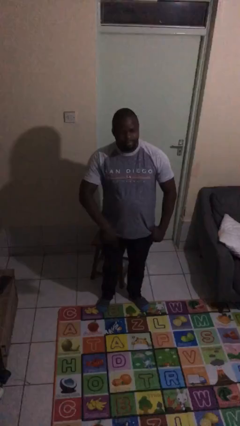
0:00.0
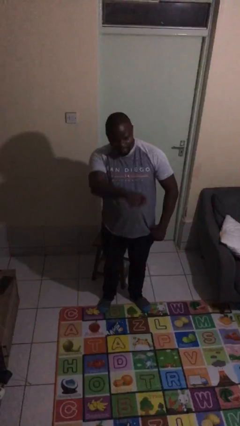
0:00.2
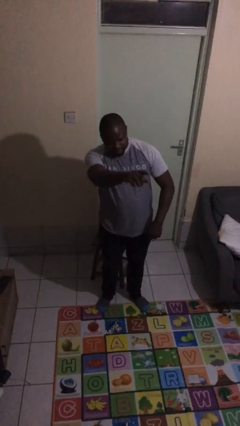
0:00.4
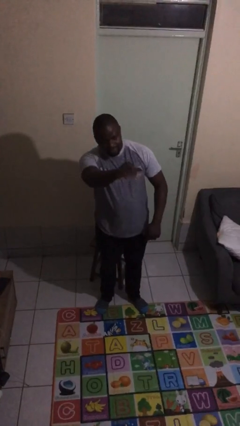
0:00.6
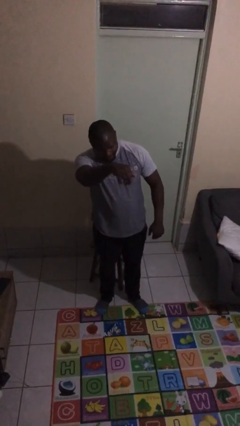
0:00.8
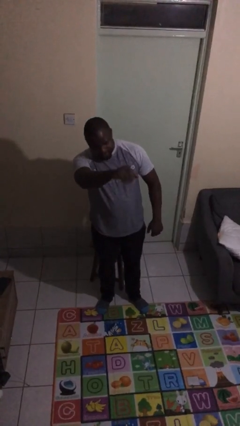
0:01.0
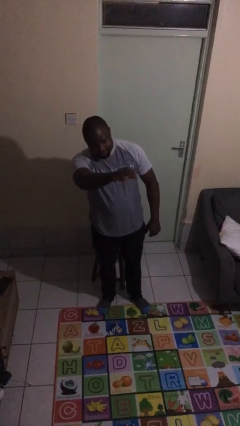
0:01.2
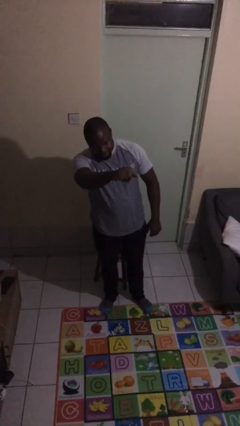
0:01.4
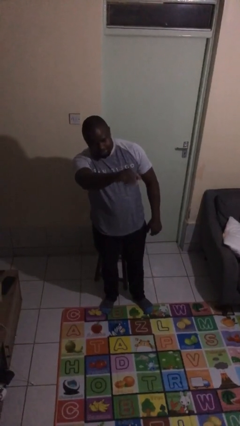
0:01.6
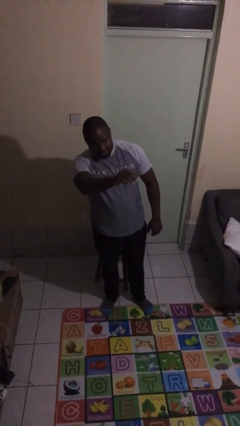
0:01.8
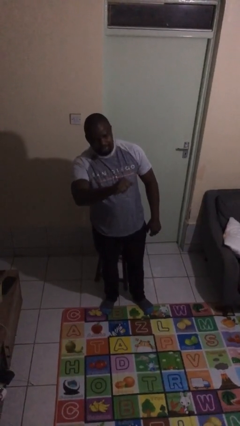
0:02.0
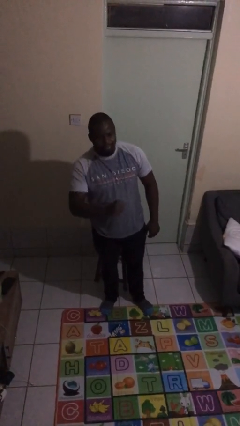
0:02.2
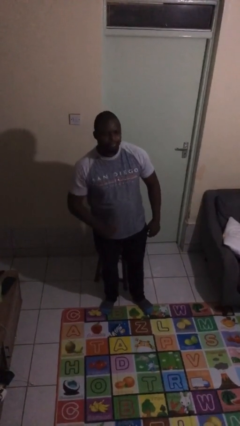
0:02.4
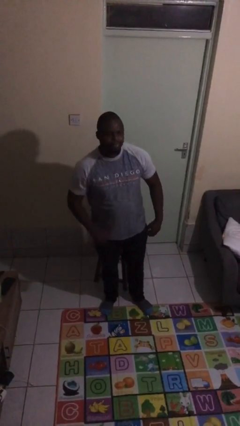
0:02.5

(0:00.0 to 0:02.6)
person gestures come here

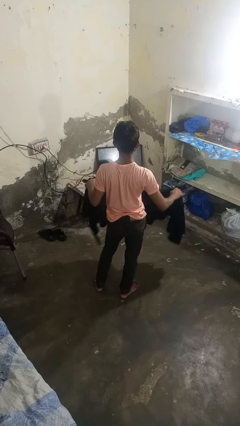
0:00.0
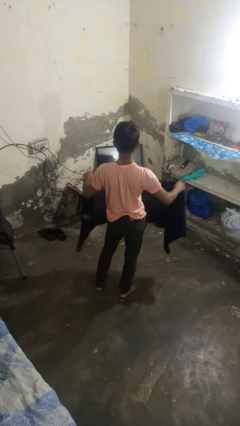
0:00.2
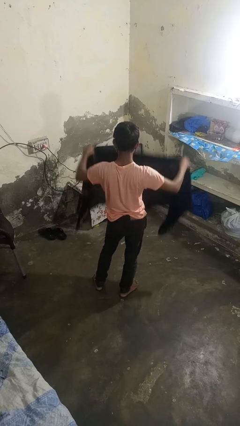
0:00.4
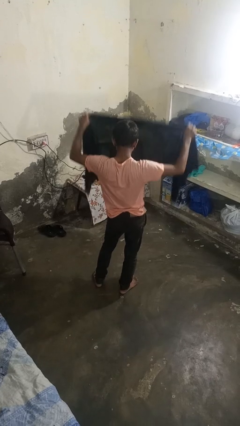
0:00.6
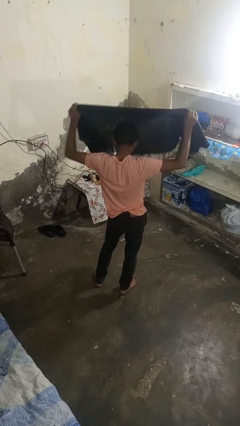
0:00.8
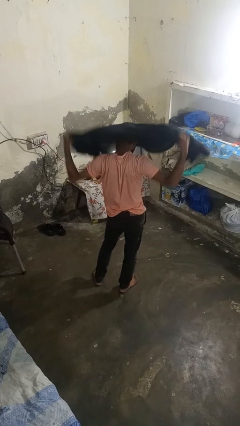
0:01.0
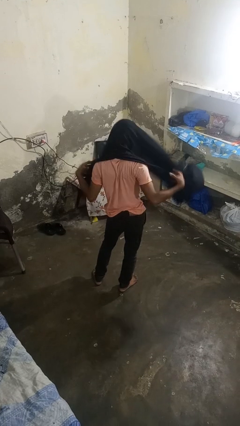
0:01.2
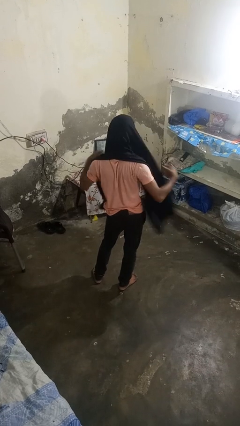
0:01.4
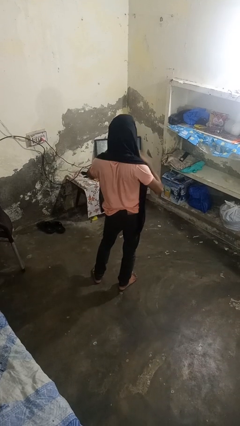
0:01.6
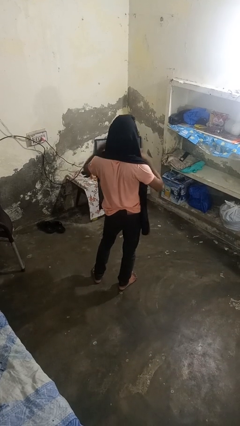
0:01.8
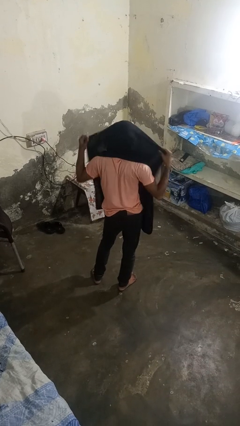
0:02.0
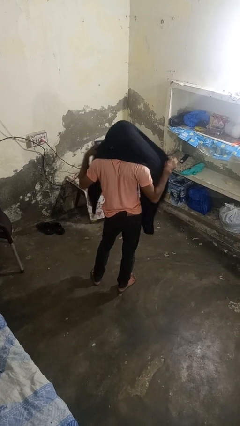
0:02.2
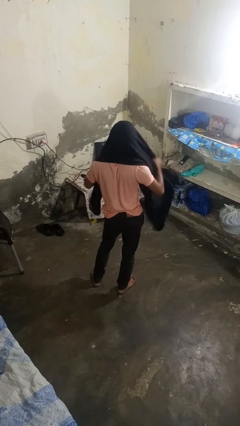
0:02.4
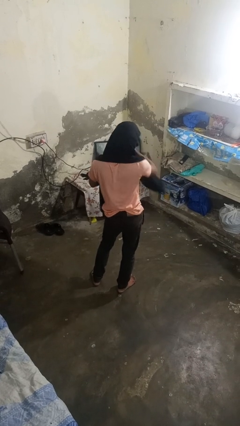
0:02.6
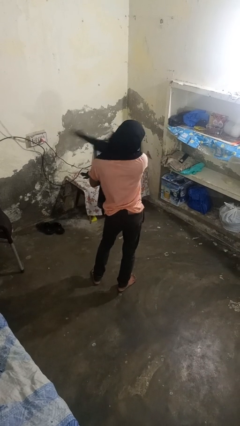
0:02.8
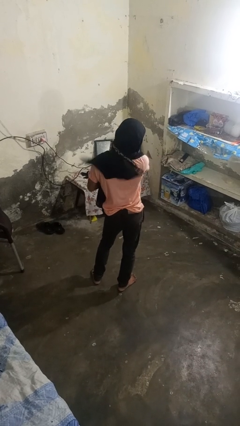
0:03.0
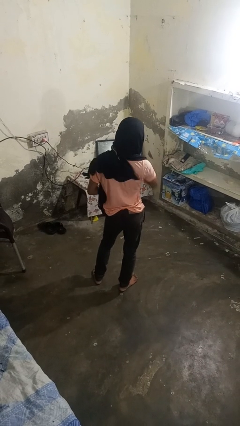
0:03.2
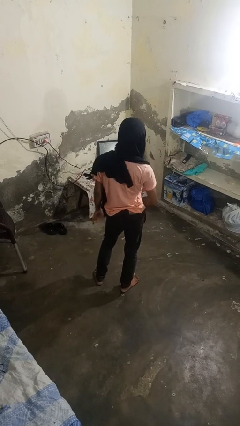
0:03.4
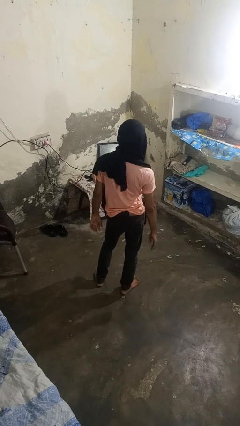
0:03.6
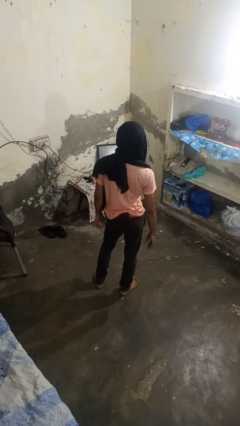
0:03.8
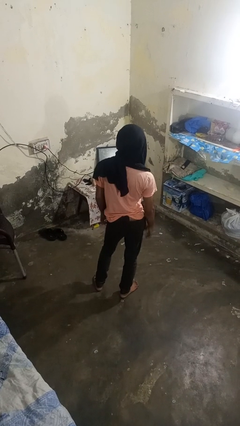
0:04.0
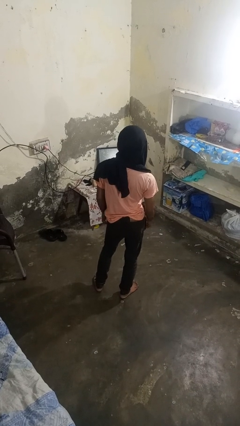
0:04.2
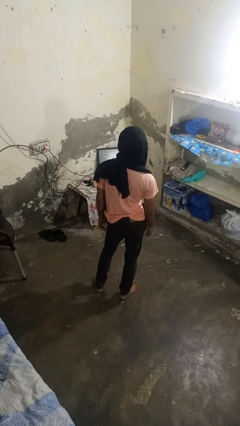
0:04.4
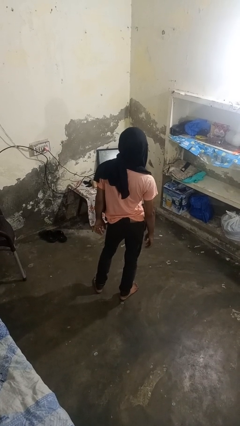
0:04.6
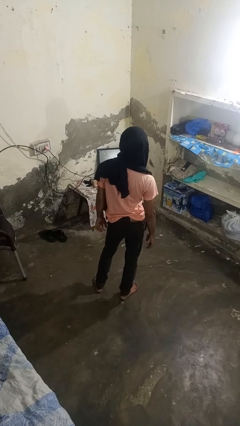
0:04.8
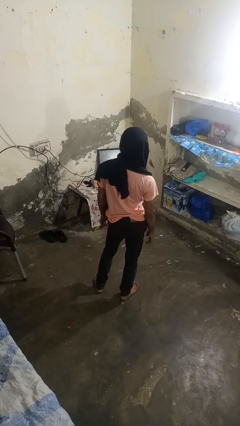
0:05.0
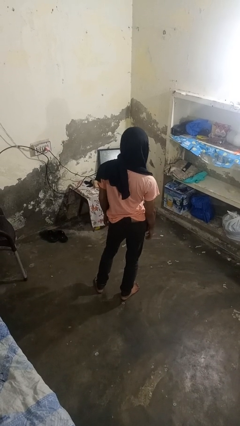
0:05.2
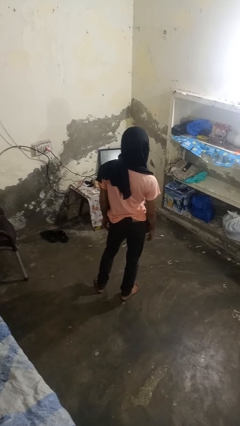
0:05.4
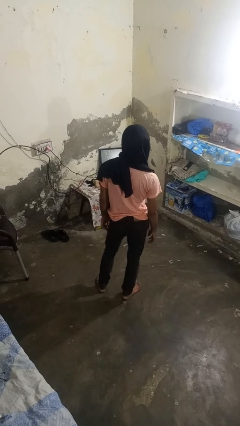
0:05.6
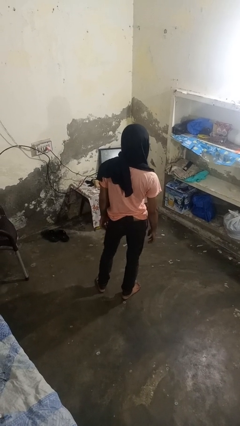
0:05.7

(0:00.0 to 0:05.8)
person puts on scarf

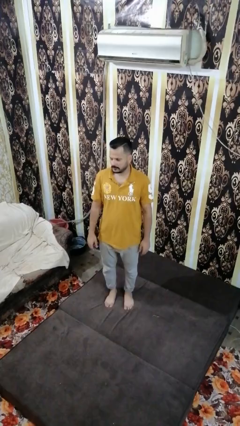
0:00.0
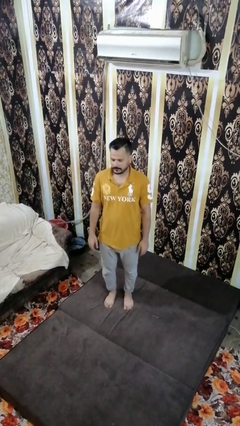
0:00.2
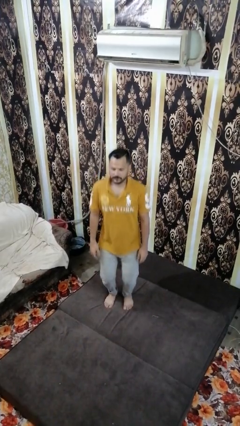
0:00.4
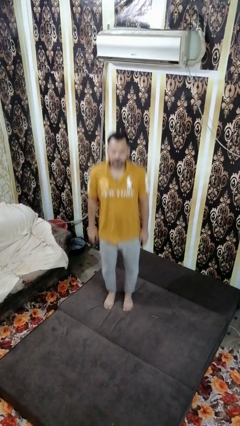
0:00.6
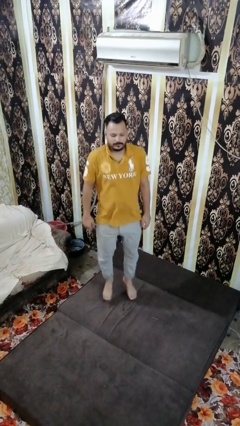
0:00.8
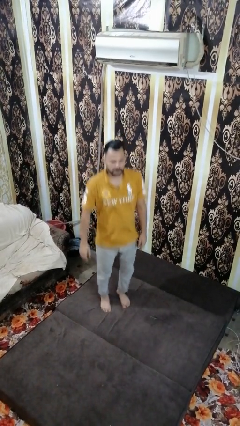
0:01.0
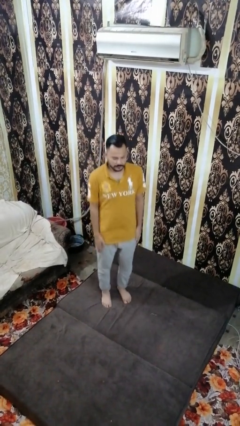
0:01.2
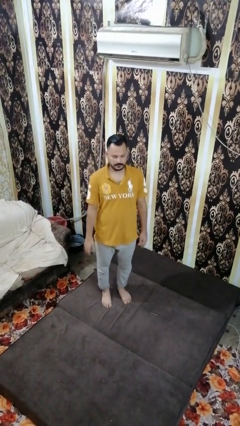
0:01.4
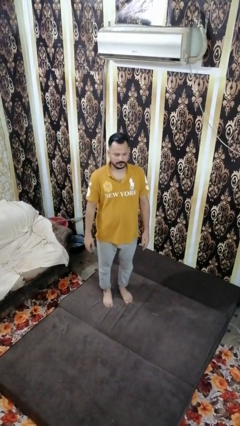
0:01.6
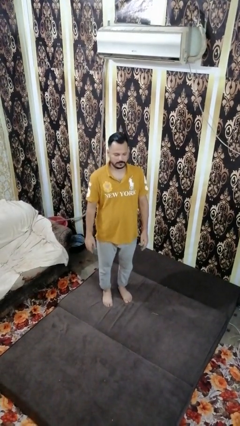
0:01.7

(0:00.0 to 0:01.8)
person jumps on bed

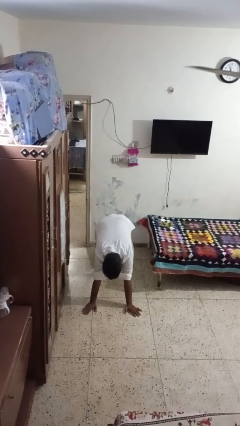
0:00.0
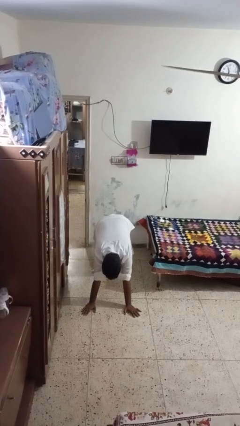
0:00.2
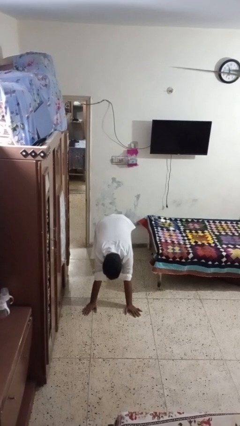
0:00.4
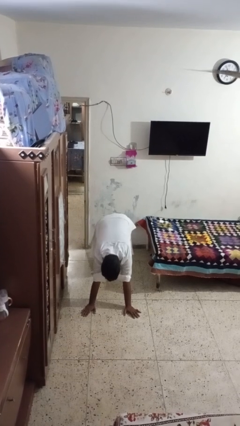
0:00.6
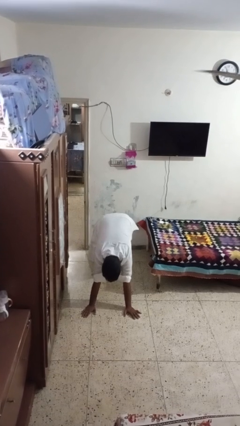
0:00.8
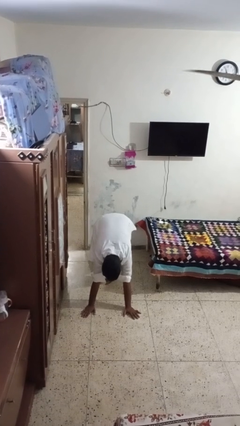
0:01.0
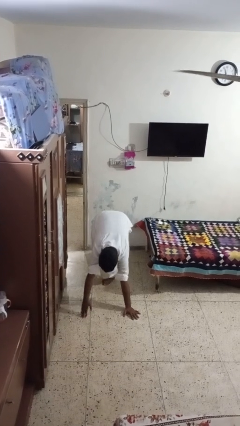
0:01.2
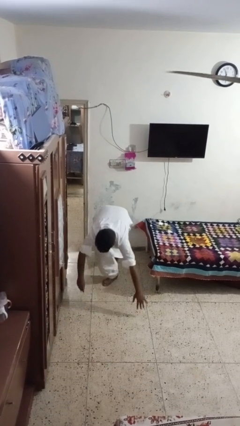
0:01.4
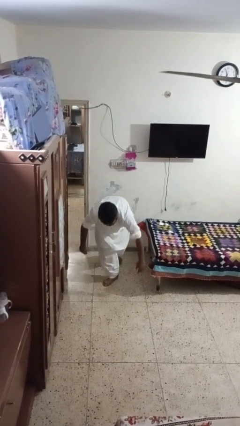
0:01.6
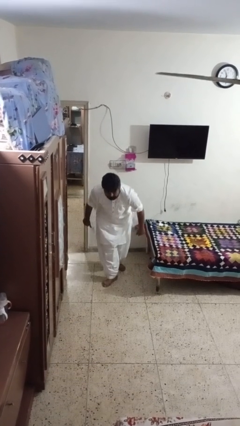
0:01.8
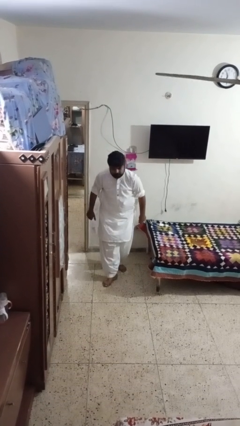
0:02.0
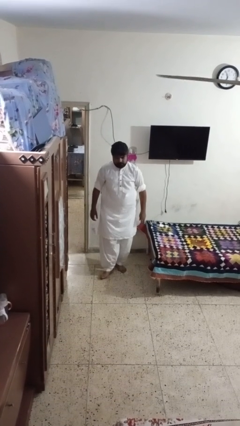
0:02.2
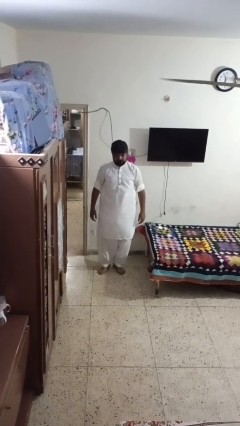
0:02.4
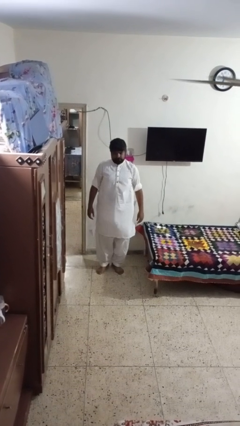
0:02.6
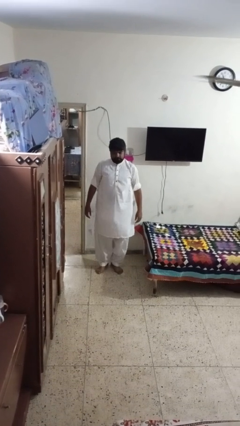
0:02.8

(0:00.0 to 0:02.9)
person stands up from floor

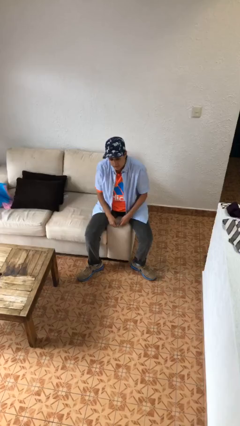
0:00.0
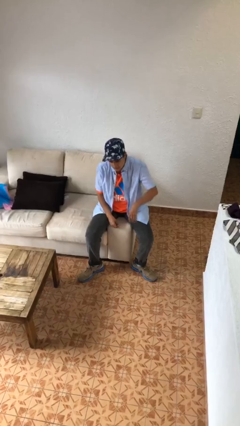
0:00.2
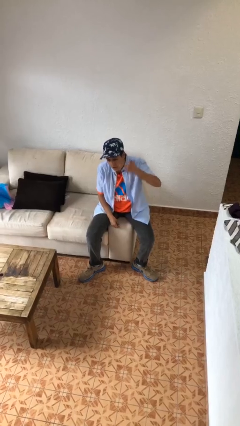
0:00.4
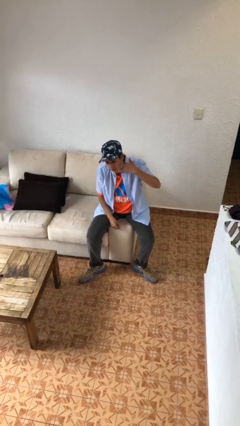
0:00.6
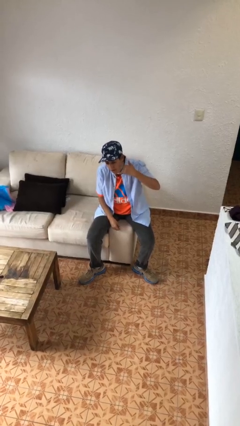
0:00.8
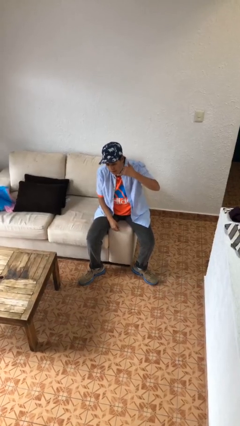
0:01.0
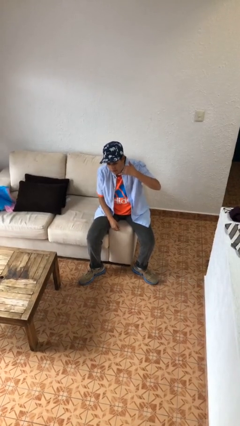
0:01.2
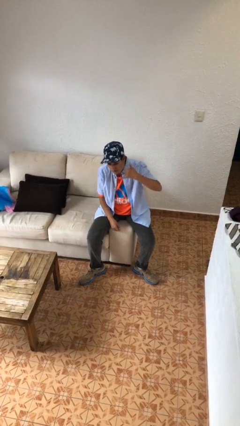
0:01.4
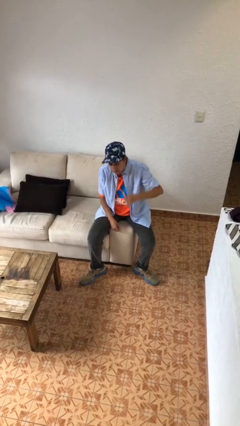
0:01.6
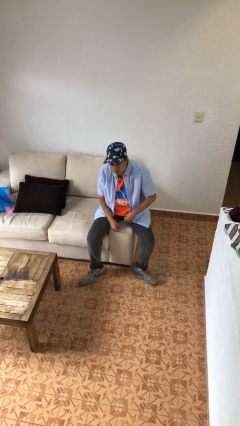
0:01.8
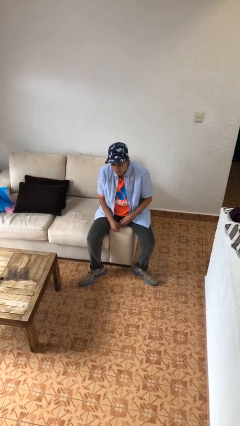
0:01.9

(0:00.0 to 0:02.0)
person gestures call me

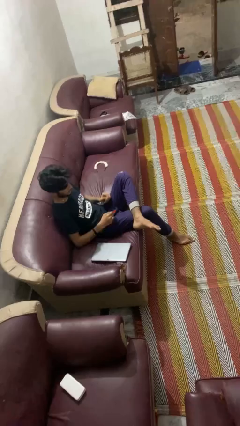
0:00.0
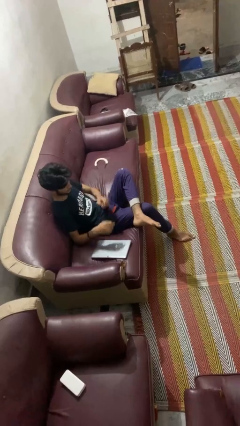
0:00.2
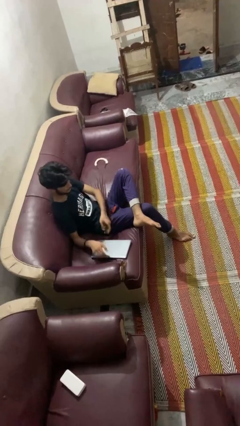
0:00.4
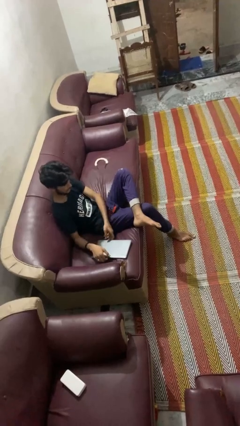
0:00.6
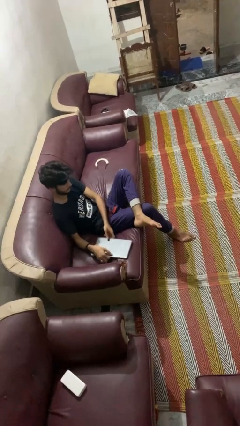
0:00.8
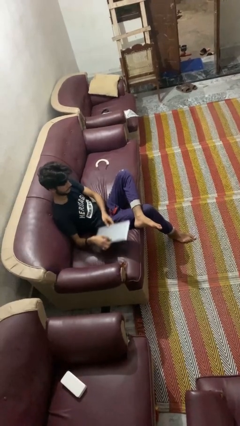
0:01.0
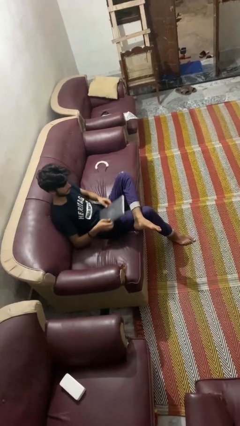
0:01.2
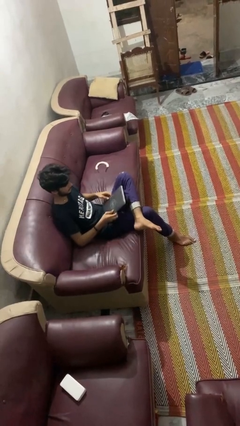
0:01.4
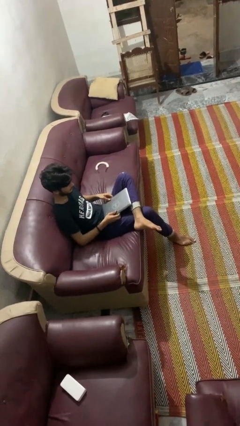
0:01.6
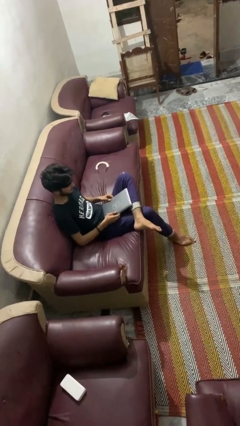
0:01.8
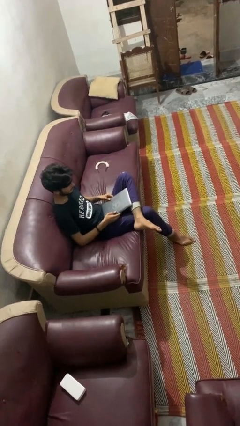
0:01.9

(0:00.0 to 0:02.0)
person picks up object from couch

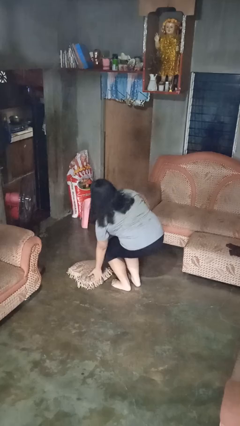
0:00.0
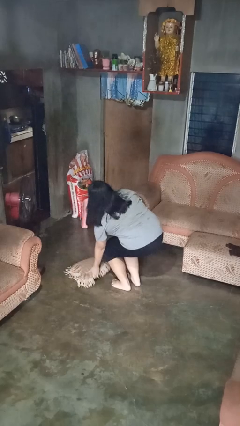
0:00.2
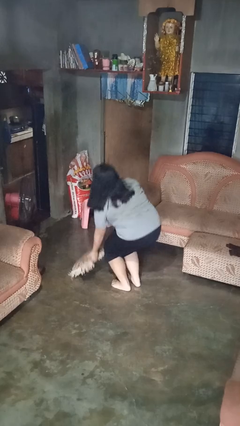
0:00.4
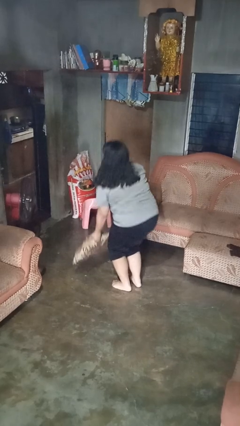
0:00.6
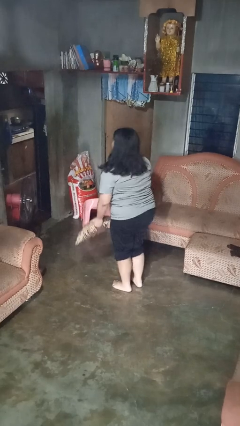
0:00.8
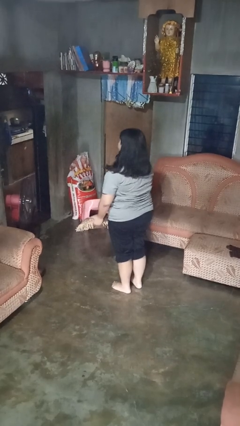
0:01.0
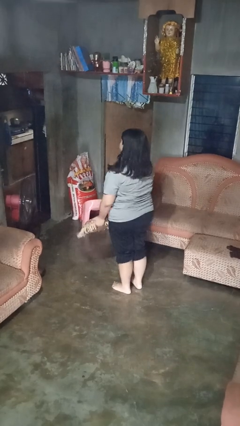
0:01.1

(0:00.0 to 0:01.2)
person picks up object from floor
